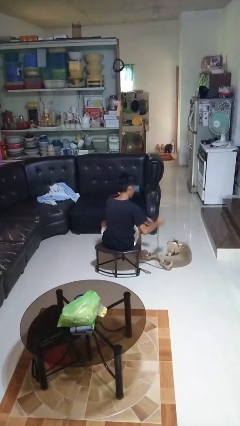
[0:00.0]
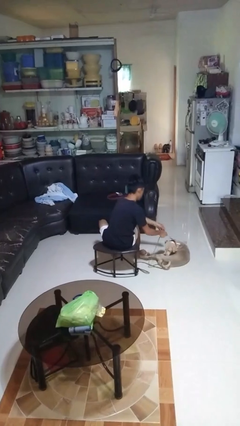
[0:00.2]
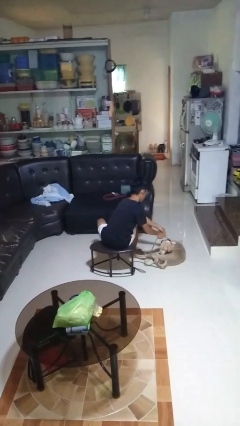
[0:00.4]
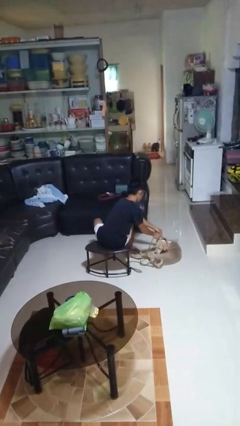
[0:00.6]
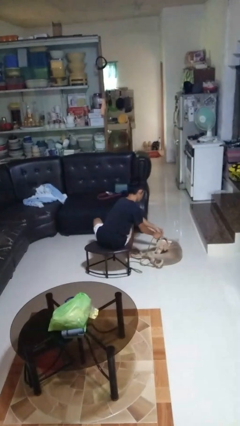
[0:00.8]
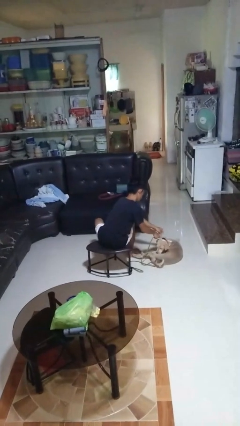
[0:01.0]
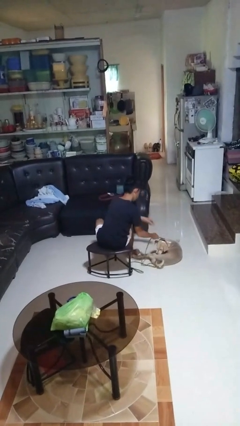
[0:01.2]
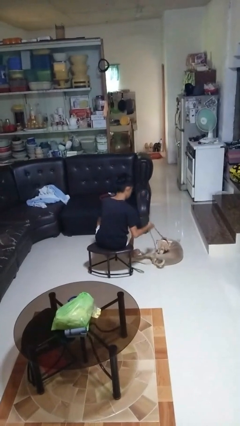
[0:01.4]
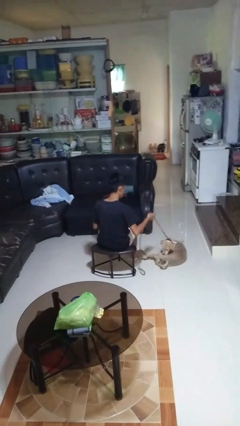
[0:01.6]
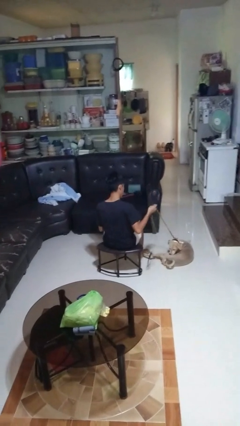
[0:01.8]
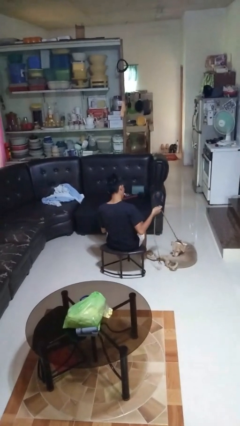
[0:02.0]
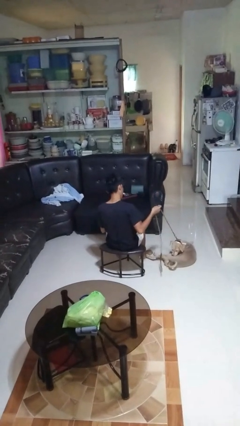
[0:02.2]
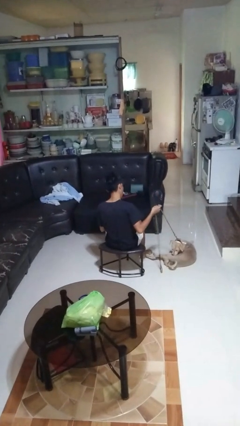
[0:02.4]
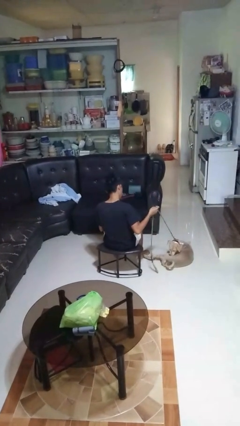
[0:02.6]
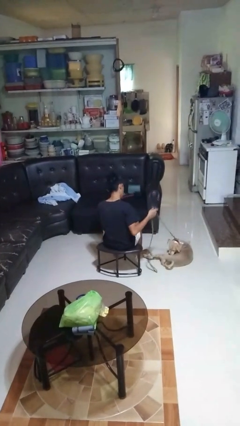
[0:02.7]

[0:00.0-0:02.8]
person attaches leash to dog

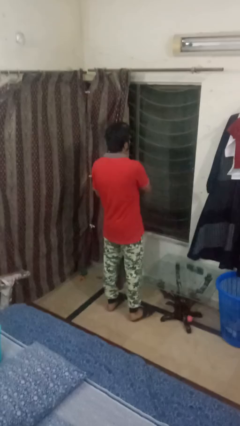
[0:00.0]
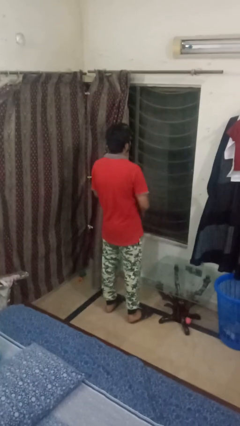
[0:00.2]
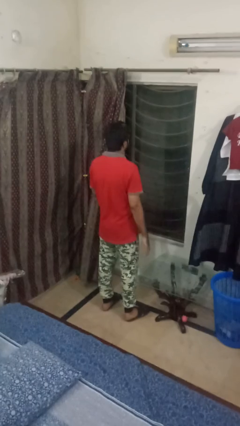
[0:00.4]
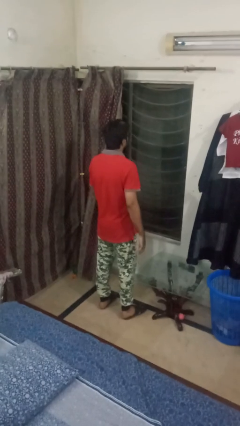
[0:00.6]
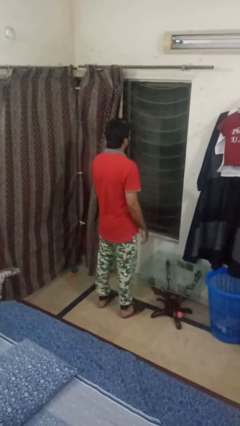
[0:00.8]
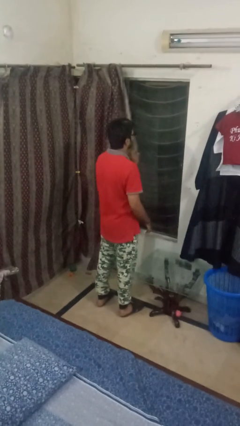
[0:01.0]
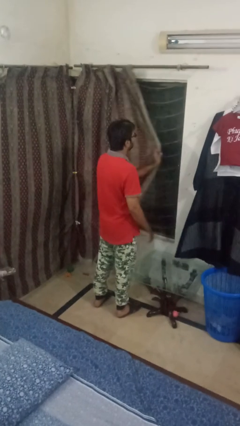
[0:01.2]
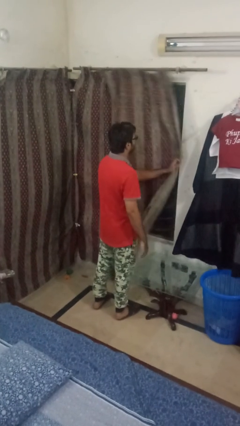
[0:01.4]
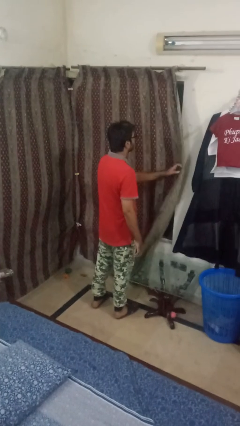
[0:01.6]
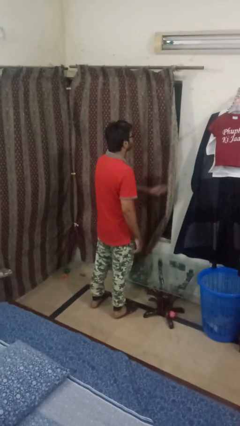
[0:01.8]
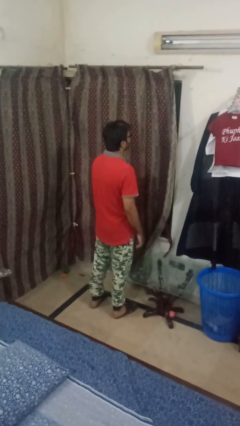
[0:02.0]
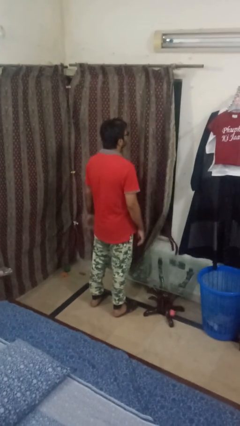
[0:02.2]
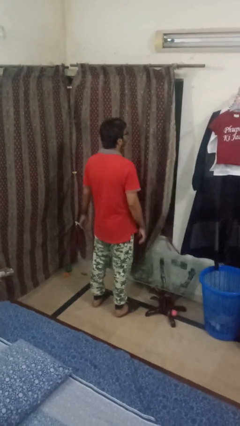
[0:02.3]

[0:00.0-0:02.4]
person closes curtains

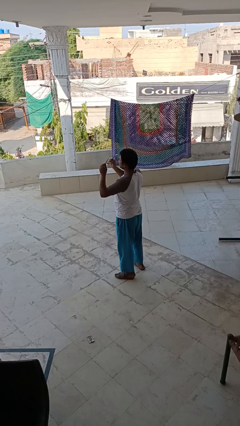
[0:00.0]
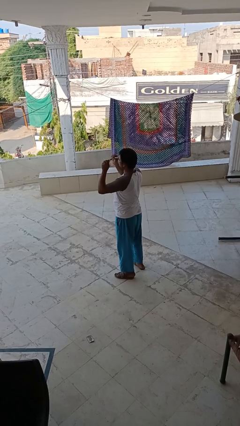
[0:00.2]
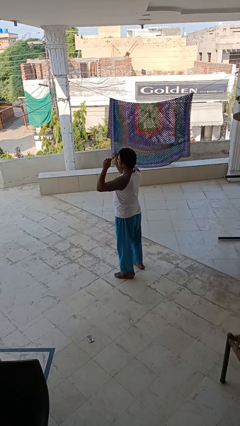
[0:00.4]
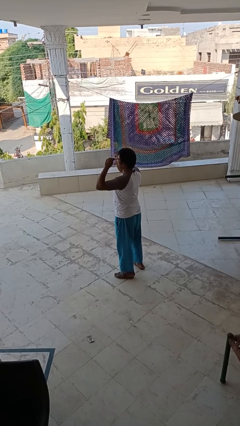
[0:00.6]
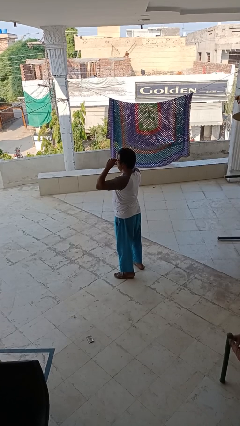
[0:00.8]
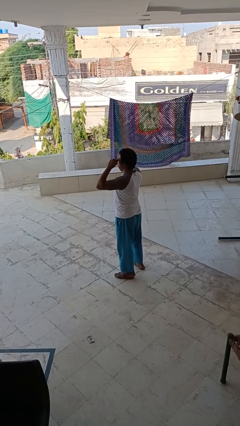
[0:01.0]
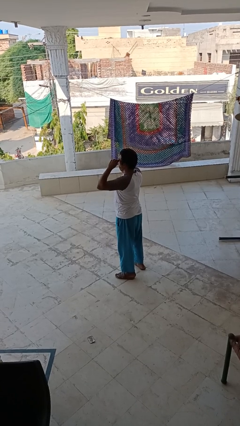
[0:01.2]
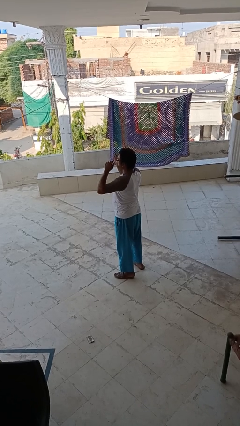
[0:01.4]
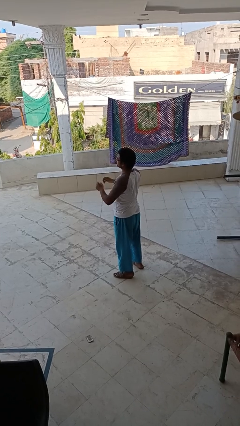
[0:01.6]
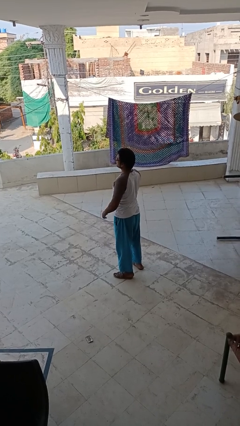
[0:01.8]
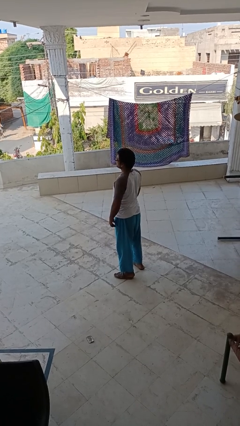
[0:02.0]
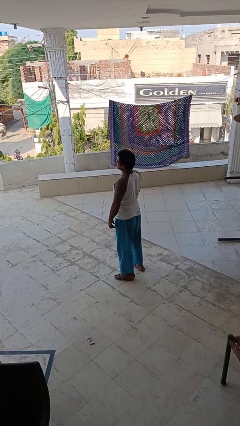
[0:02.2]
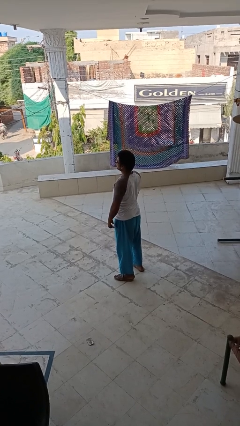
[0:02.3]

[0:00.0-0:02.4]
person puts on glasses

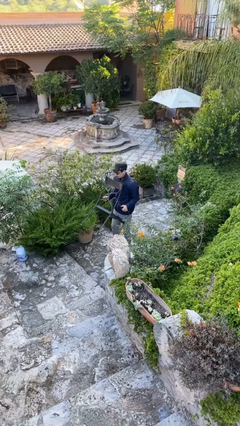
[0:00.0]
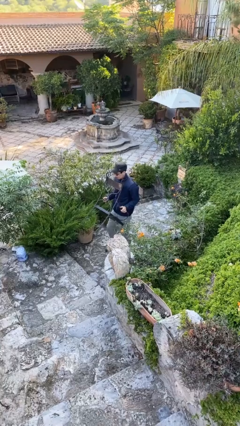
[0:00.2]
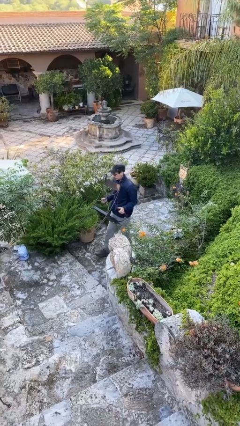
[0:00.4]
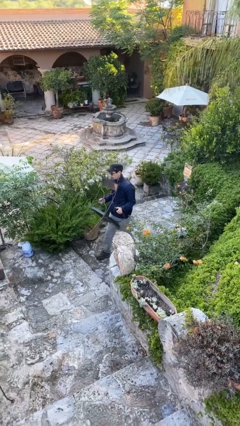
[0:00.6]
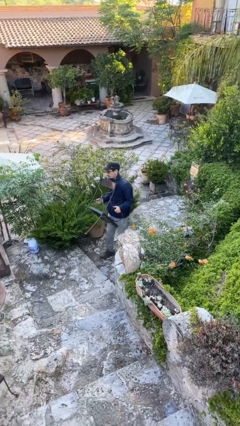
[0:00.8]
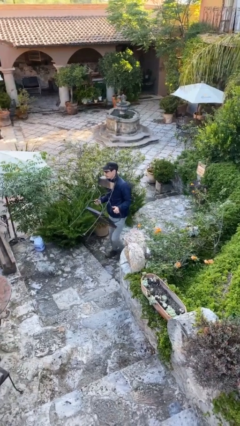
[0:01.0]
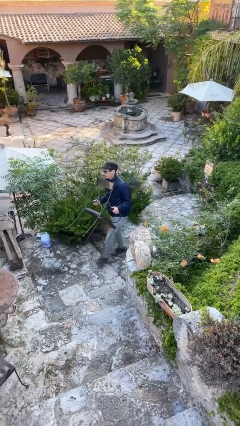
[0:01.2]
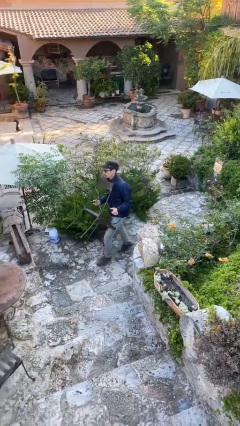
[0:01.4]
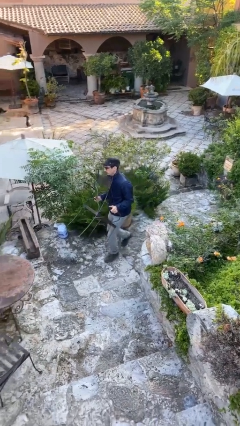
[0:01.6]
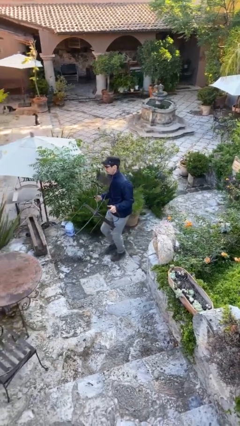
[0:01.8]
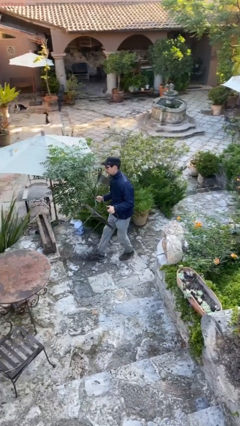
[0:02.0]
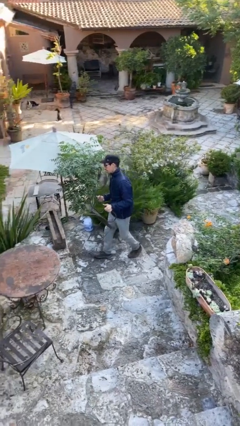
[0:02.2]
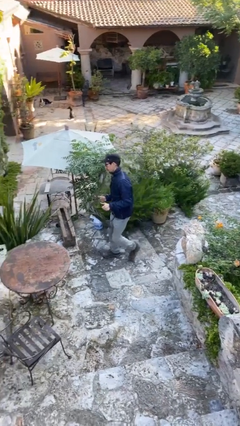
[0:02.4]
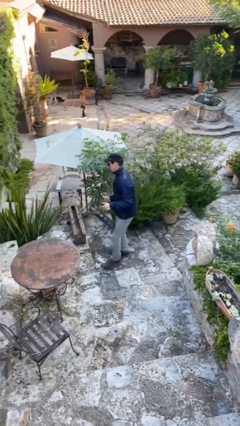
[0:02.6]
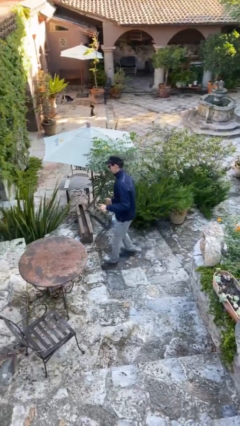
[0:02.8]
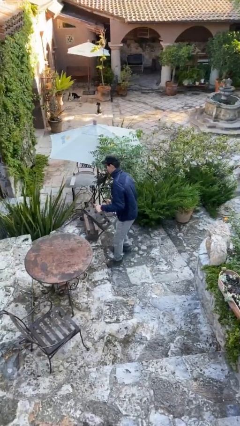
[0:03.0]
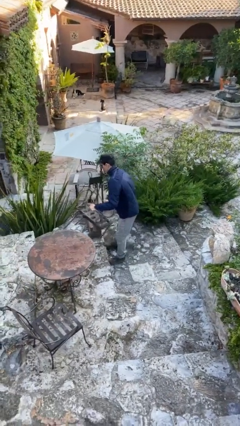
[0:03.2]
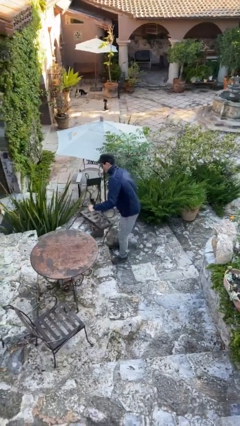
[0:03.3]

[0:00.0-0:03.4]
person carries heavy object

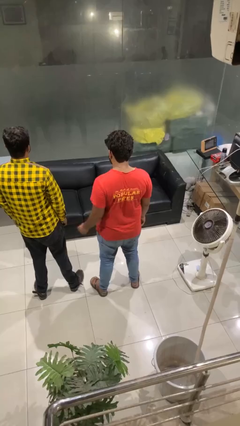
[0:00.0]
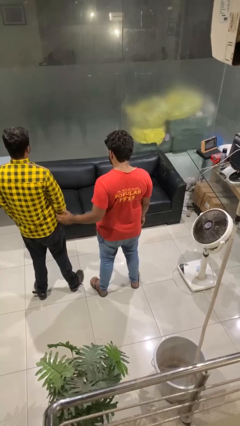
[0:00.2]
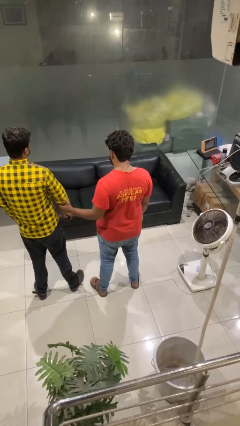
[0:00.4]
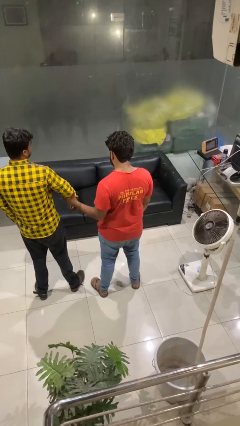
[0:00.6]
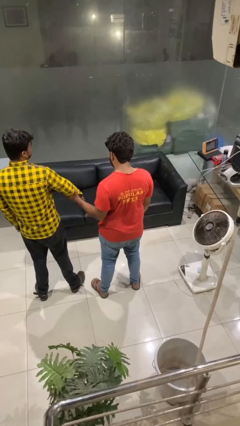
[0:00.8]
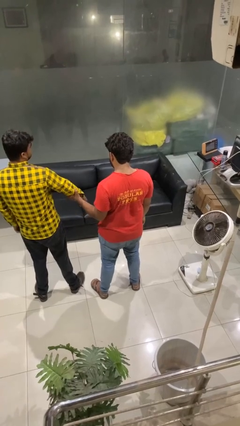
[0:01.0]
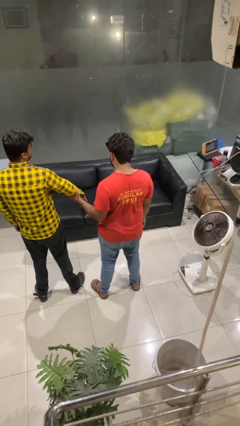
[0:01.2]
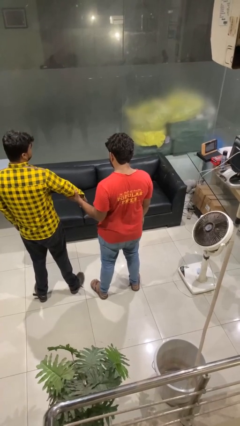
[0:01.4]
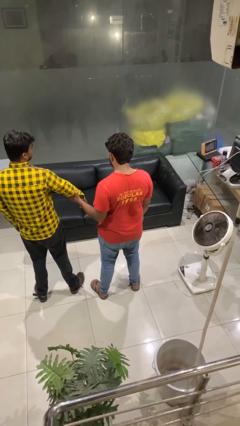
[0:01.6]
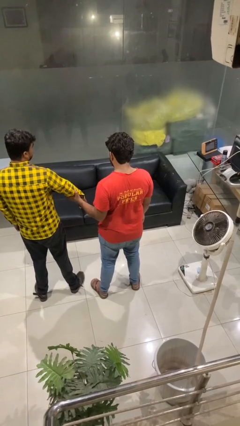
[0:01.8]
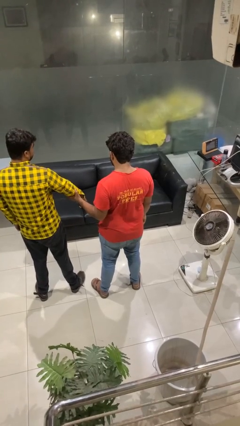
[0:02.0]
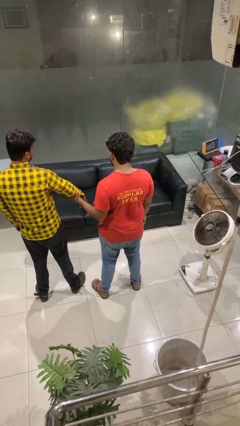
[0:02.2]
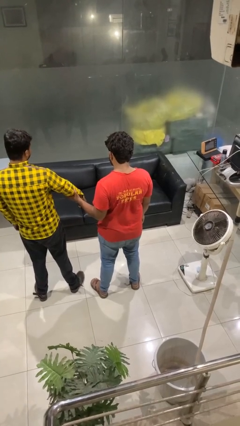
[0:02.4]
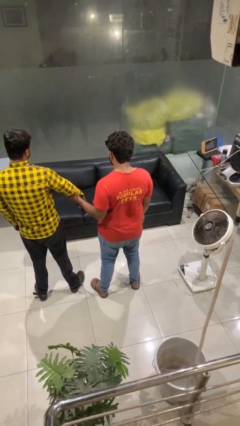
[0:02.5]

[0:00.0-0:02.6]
person grabs person by forearm

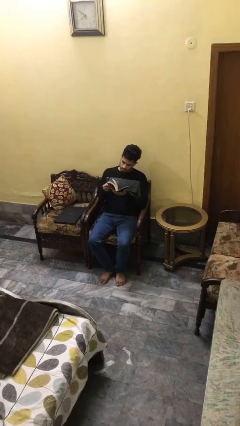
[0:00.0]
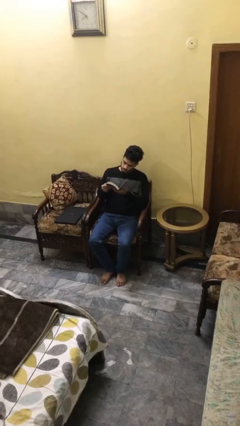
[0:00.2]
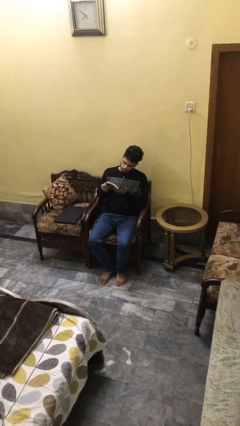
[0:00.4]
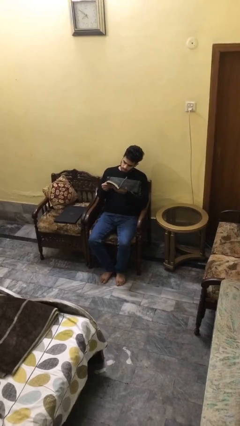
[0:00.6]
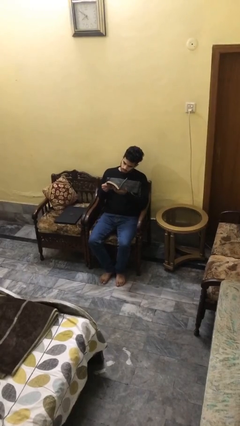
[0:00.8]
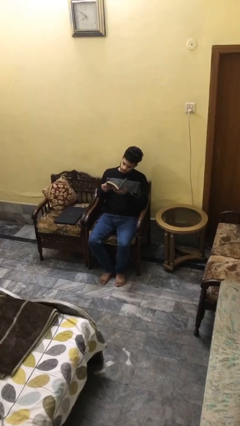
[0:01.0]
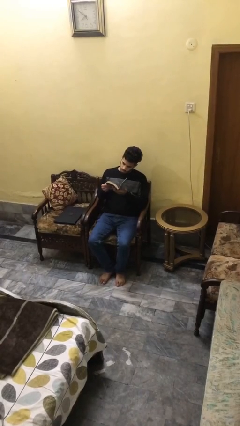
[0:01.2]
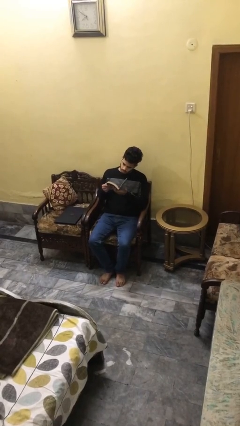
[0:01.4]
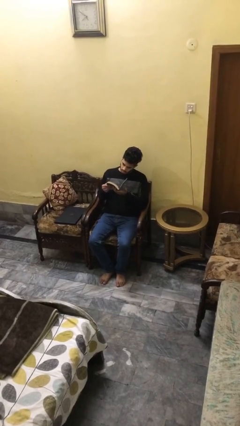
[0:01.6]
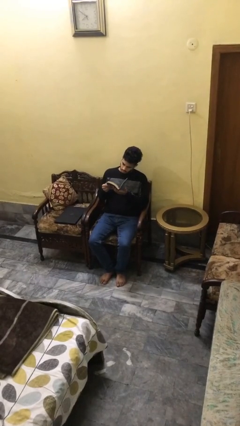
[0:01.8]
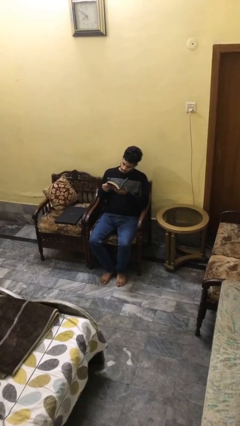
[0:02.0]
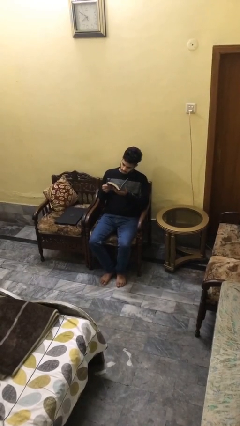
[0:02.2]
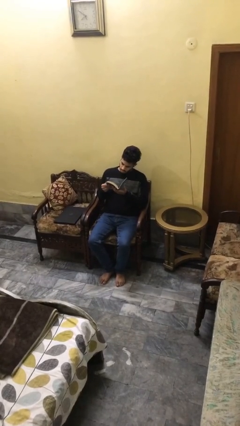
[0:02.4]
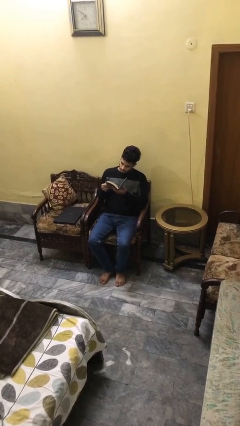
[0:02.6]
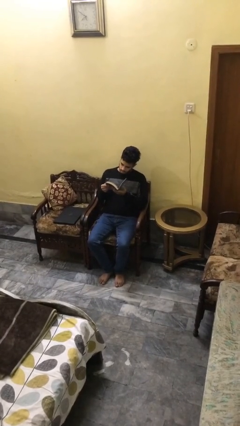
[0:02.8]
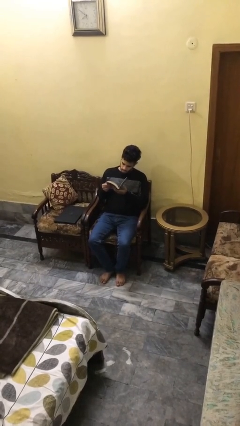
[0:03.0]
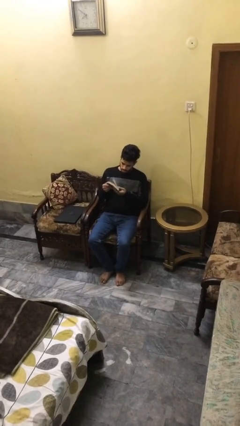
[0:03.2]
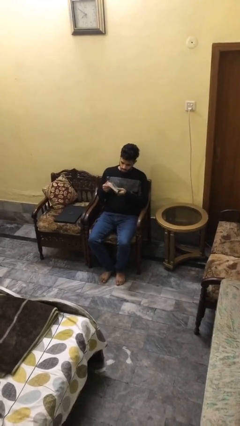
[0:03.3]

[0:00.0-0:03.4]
person reads document

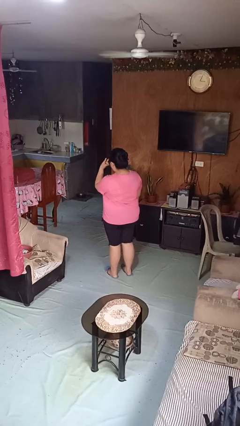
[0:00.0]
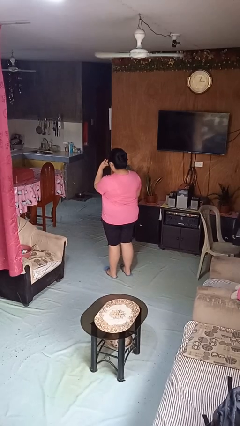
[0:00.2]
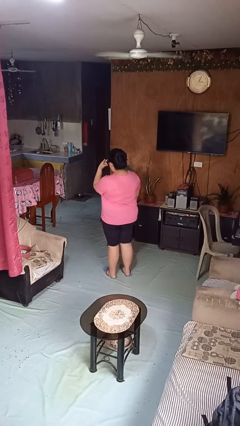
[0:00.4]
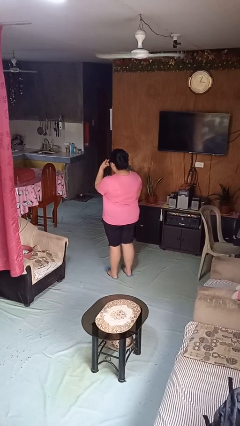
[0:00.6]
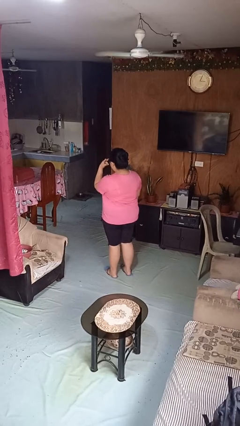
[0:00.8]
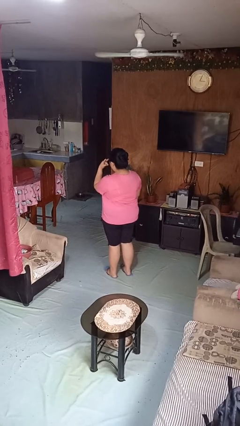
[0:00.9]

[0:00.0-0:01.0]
person gestures watch closely
